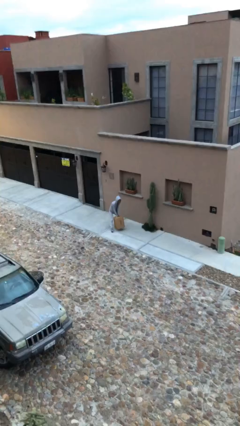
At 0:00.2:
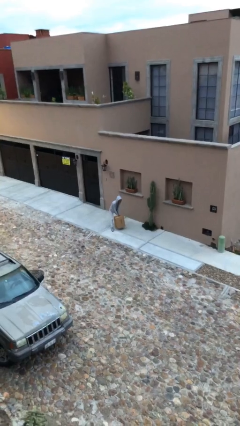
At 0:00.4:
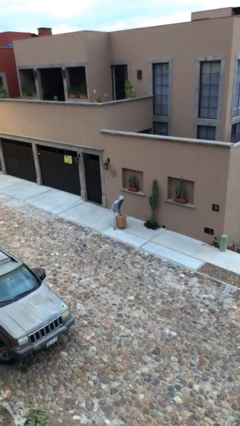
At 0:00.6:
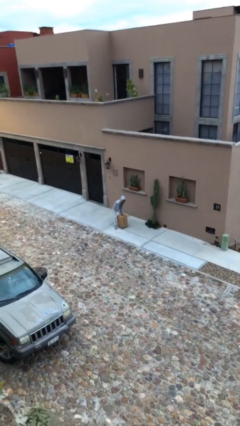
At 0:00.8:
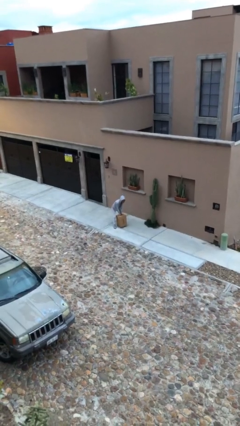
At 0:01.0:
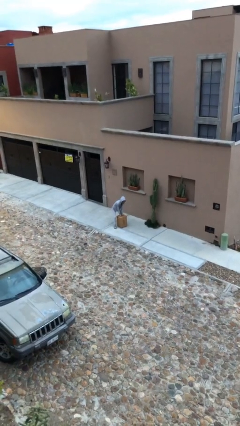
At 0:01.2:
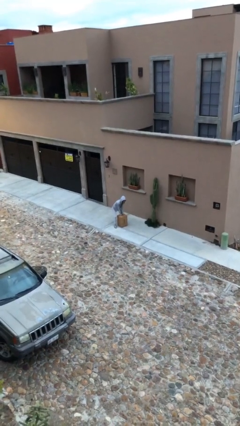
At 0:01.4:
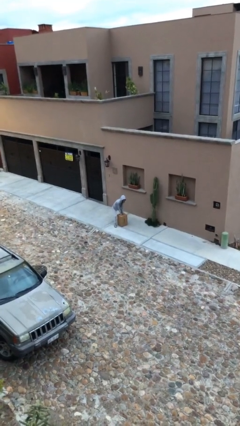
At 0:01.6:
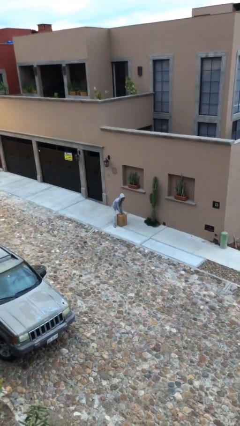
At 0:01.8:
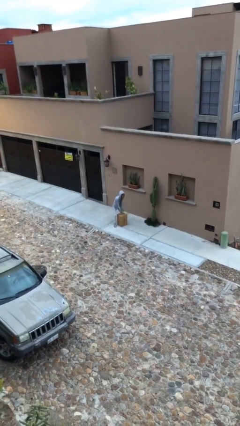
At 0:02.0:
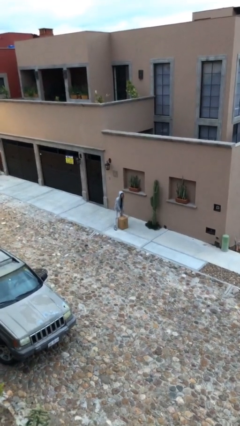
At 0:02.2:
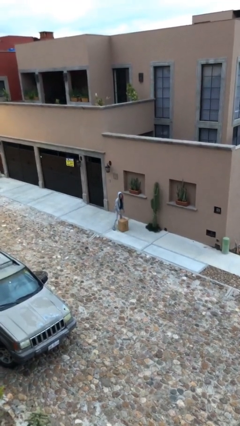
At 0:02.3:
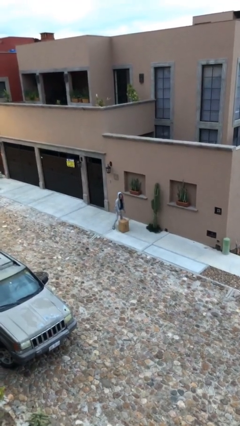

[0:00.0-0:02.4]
person puts down object on floor

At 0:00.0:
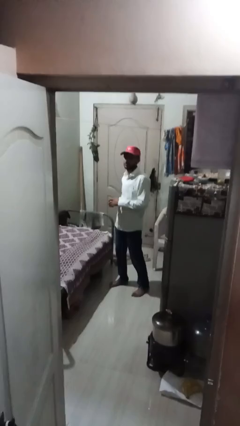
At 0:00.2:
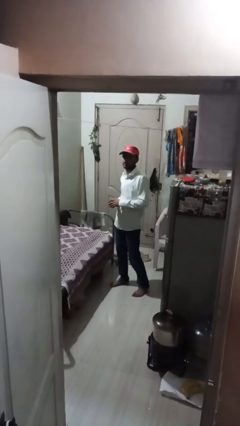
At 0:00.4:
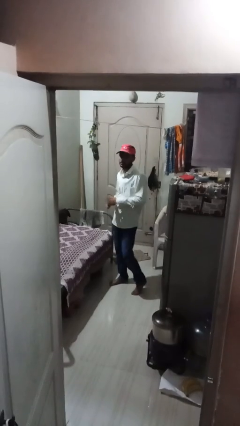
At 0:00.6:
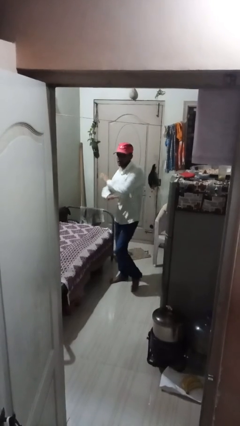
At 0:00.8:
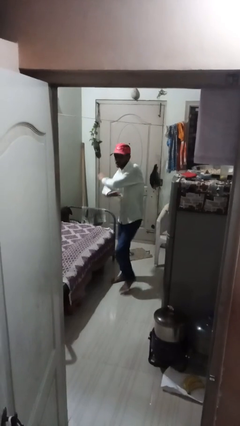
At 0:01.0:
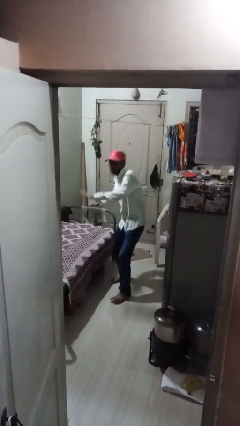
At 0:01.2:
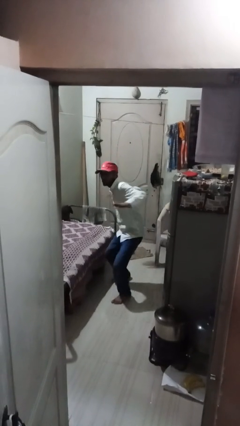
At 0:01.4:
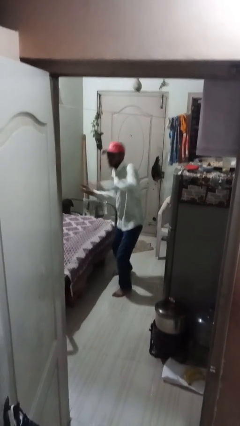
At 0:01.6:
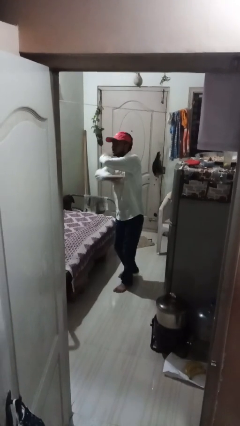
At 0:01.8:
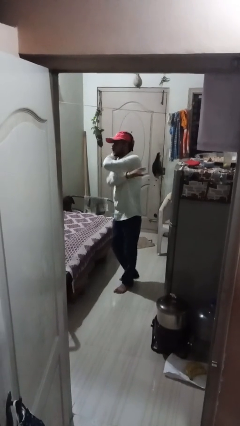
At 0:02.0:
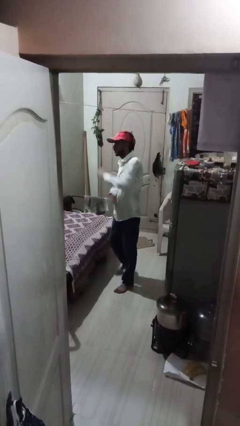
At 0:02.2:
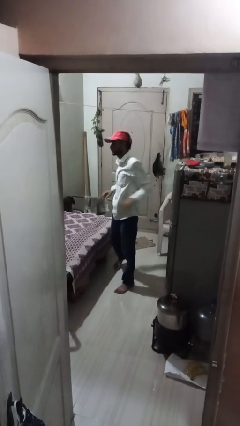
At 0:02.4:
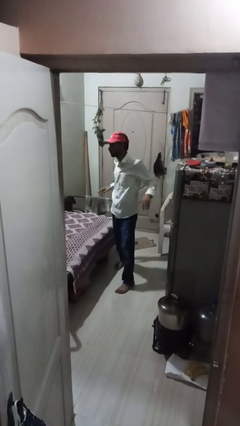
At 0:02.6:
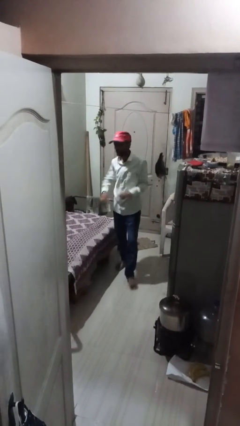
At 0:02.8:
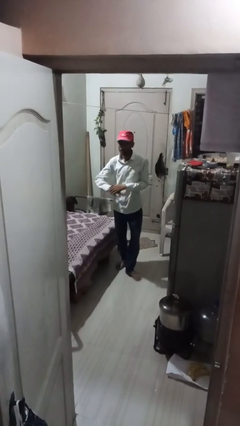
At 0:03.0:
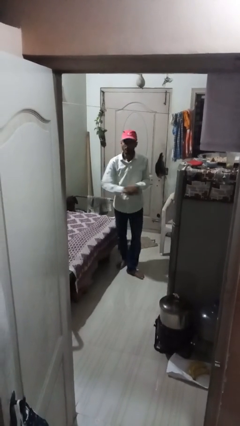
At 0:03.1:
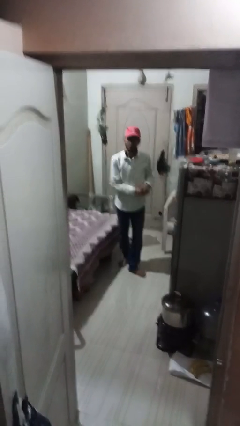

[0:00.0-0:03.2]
person karate chop

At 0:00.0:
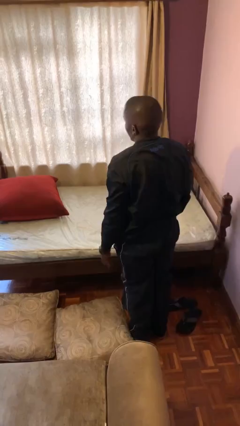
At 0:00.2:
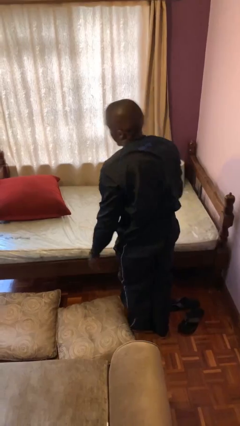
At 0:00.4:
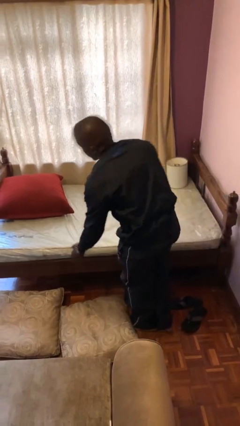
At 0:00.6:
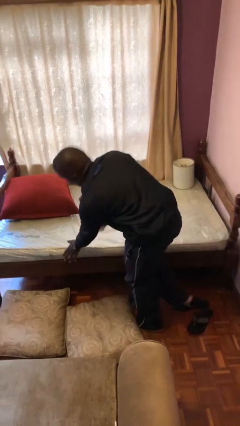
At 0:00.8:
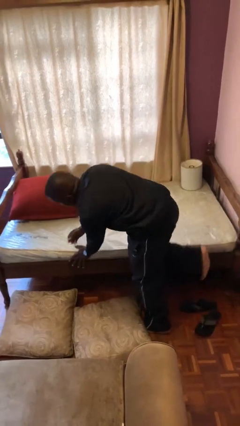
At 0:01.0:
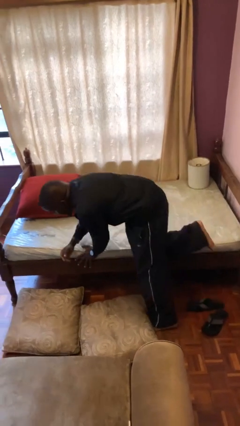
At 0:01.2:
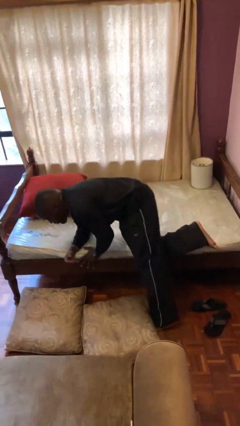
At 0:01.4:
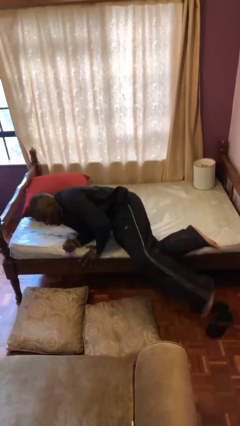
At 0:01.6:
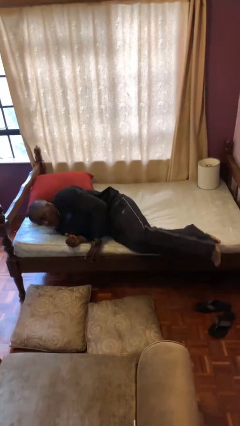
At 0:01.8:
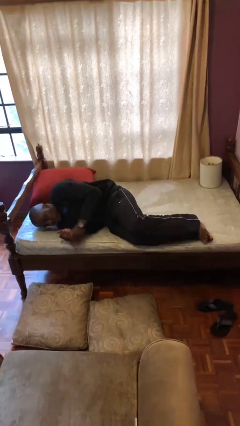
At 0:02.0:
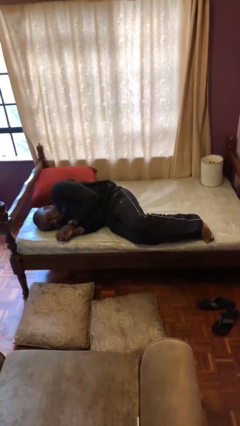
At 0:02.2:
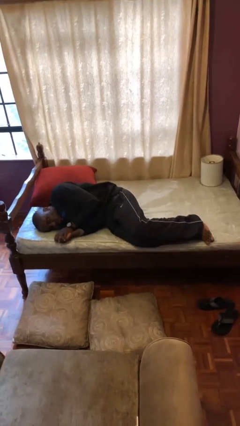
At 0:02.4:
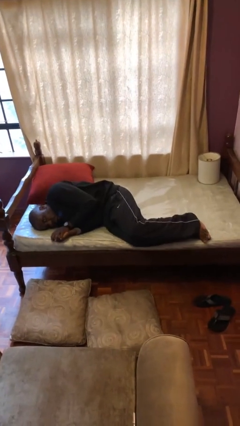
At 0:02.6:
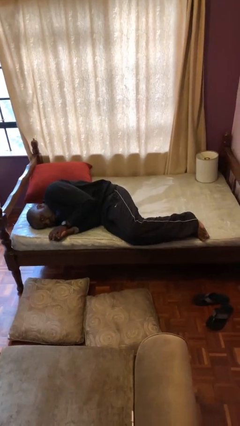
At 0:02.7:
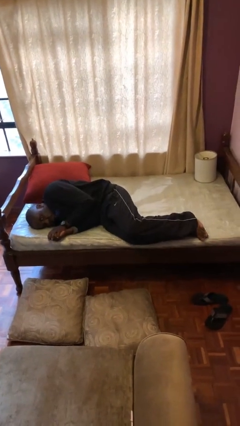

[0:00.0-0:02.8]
person lies down on bed

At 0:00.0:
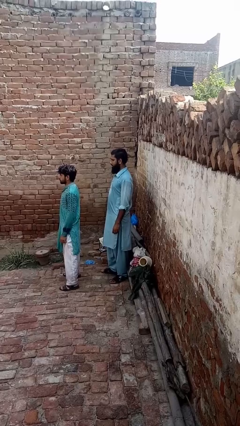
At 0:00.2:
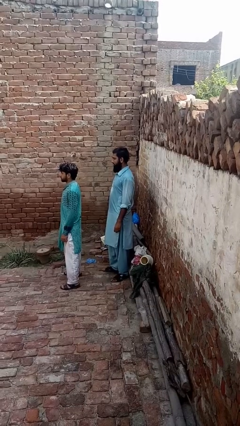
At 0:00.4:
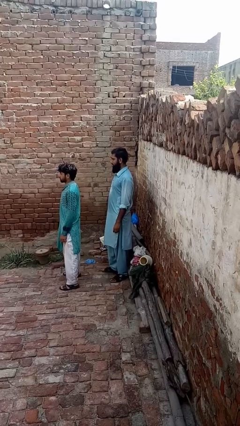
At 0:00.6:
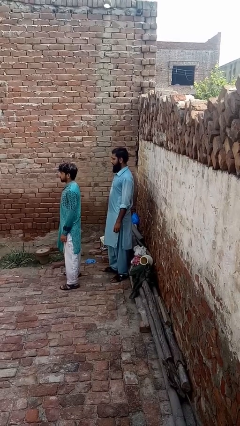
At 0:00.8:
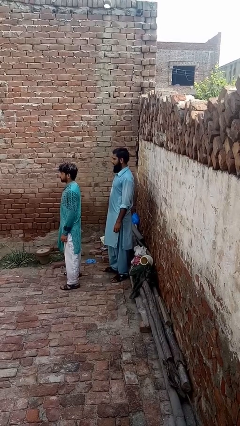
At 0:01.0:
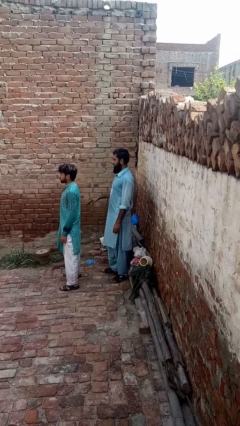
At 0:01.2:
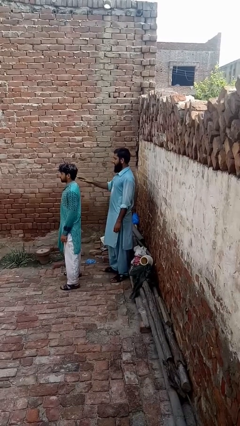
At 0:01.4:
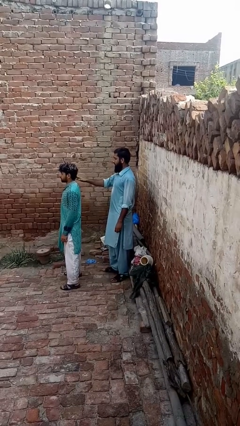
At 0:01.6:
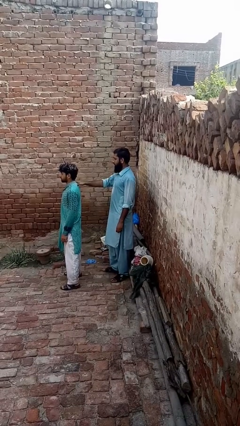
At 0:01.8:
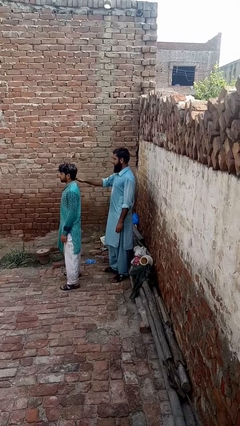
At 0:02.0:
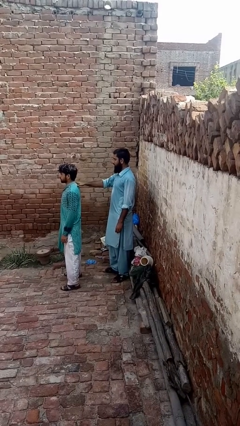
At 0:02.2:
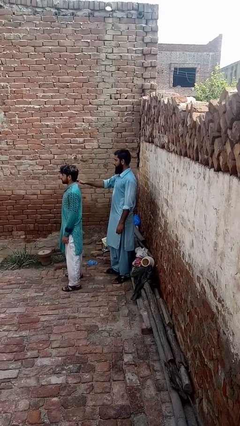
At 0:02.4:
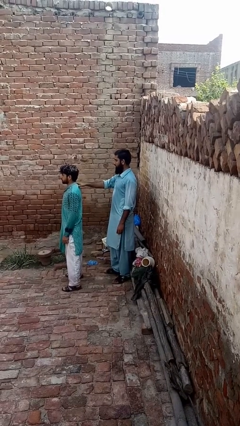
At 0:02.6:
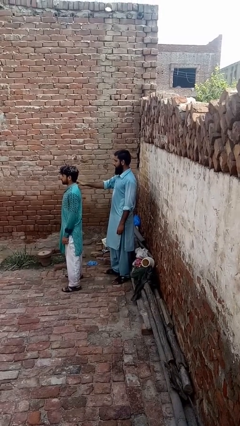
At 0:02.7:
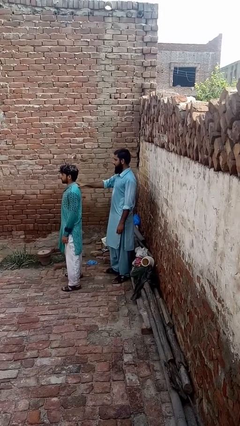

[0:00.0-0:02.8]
person touches back of person

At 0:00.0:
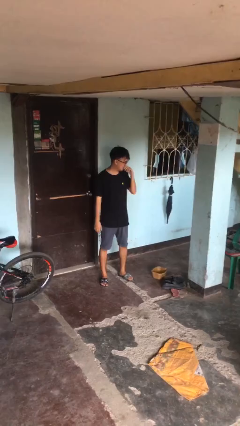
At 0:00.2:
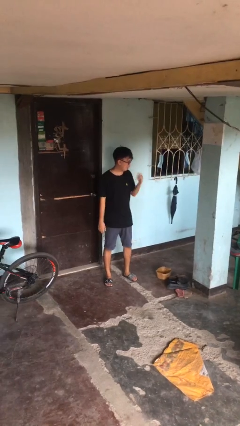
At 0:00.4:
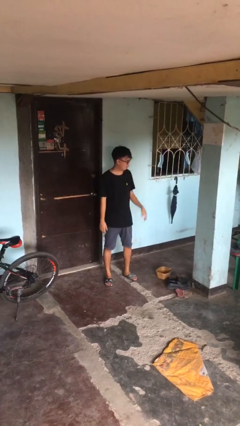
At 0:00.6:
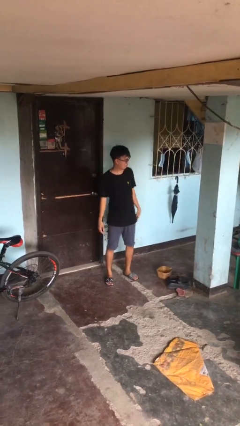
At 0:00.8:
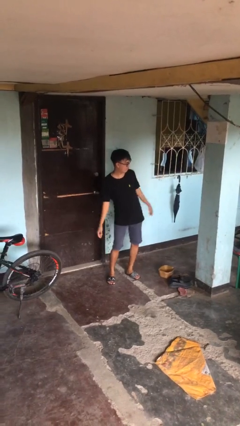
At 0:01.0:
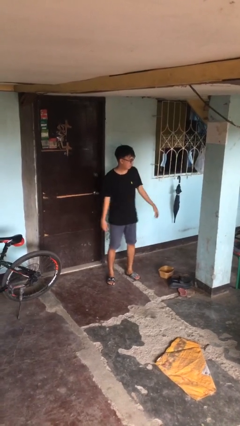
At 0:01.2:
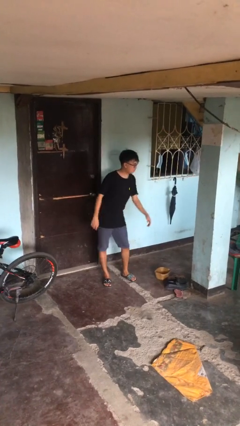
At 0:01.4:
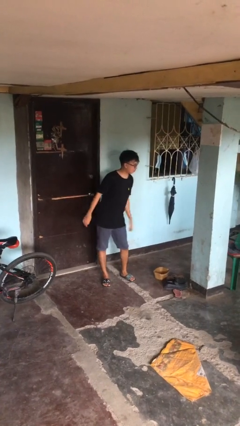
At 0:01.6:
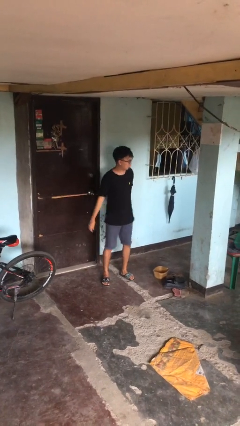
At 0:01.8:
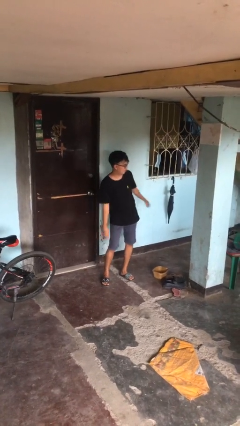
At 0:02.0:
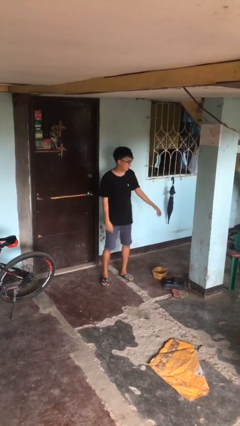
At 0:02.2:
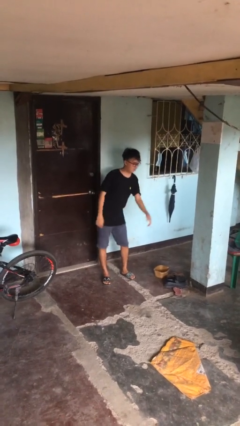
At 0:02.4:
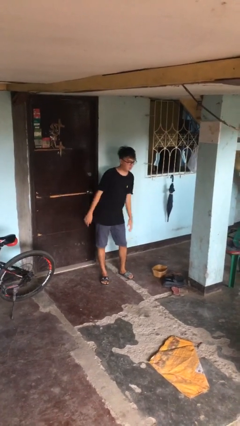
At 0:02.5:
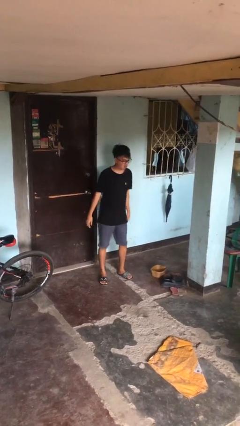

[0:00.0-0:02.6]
person wiggles hips

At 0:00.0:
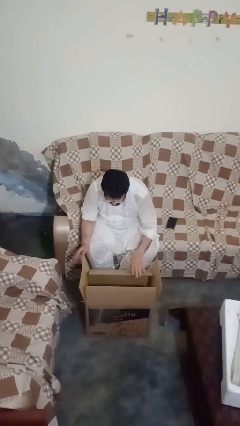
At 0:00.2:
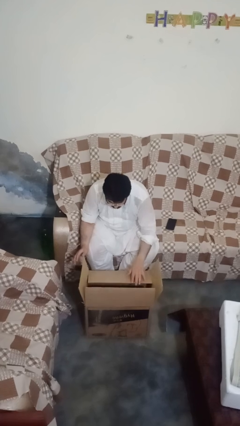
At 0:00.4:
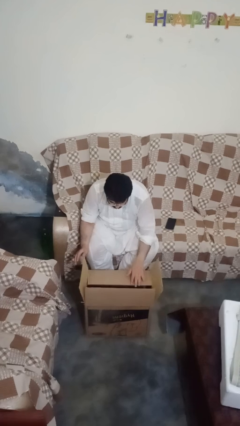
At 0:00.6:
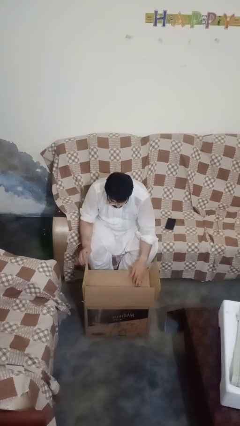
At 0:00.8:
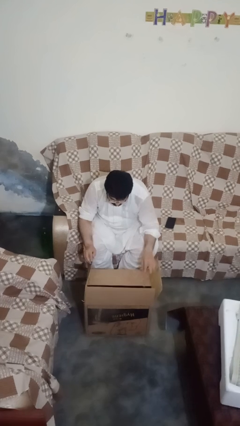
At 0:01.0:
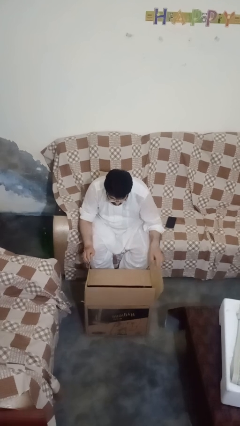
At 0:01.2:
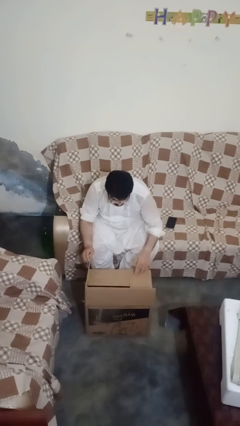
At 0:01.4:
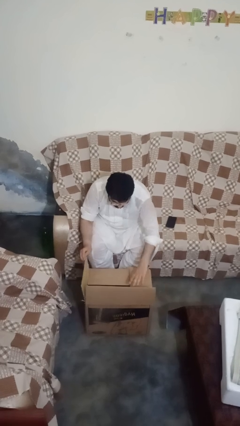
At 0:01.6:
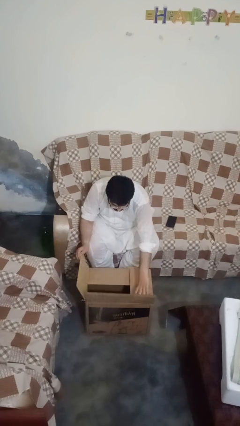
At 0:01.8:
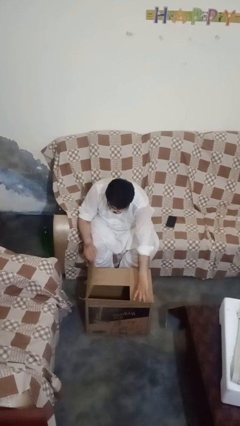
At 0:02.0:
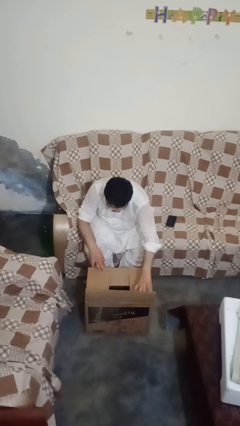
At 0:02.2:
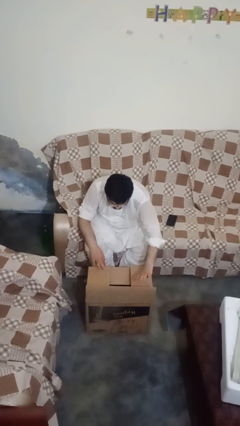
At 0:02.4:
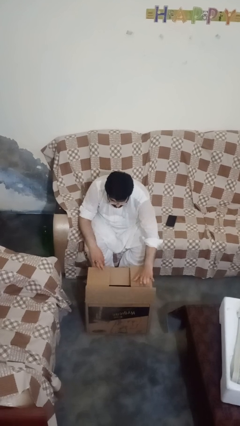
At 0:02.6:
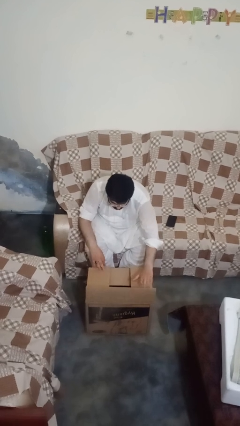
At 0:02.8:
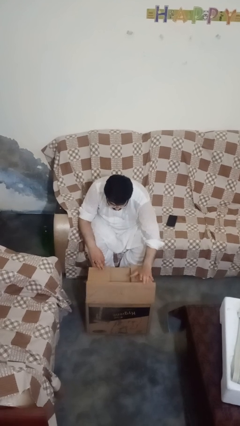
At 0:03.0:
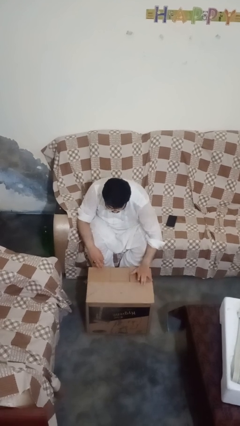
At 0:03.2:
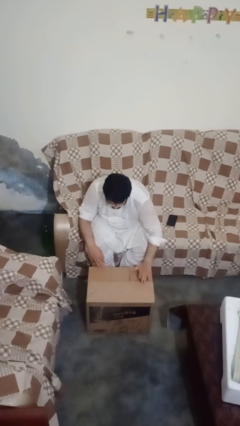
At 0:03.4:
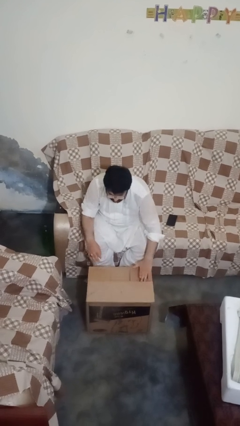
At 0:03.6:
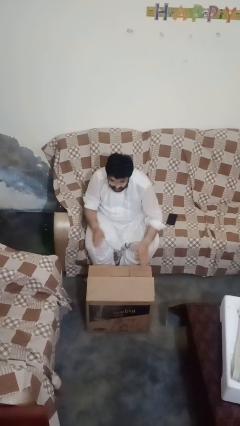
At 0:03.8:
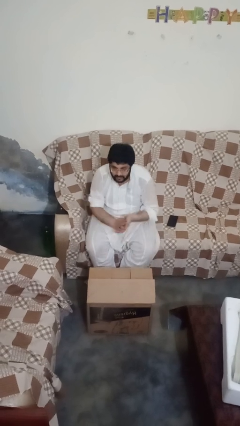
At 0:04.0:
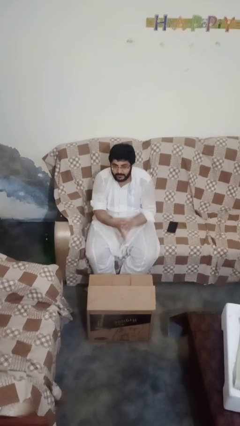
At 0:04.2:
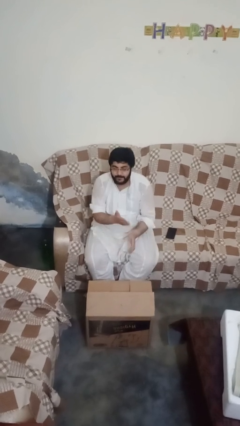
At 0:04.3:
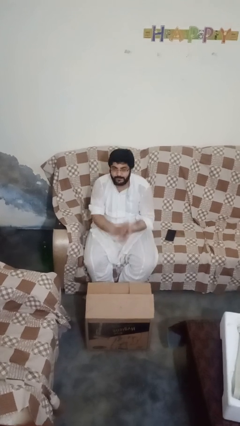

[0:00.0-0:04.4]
person closes box
